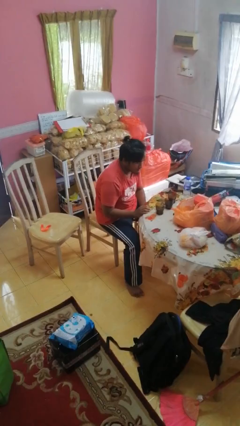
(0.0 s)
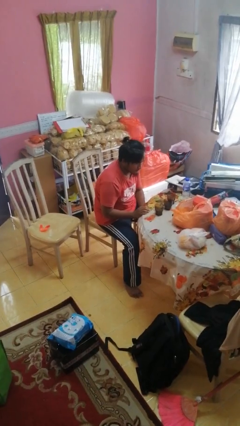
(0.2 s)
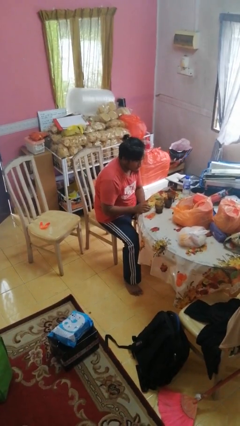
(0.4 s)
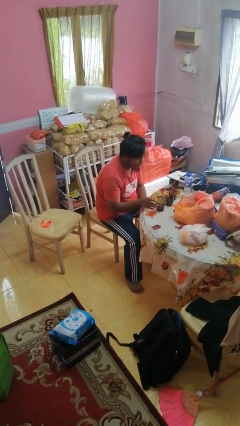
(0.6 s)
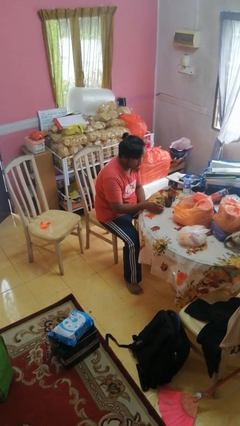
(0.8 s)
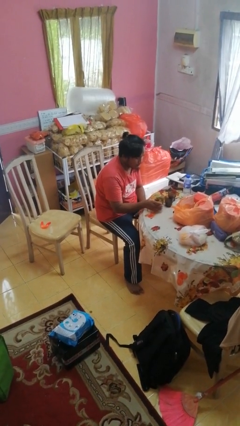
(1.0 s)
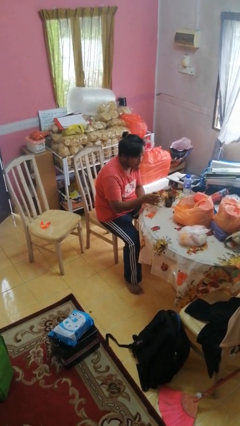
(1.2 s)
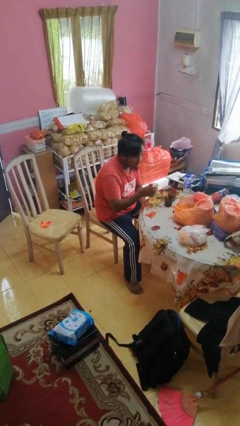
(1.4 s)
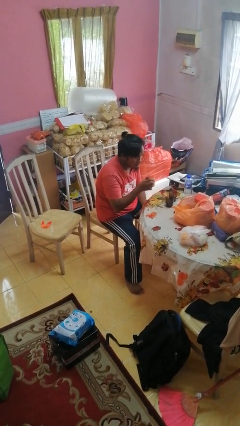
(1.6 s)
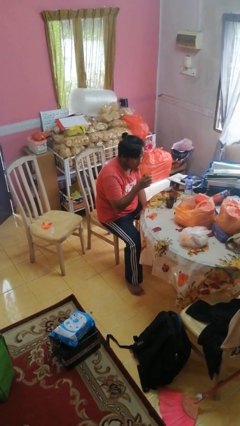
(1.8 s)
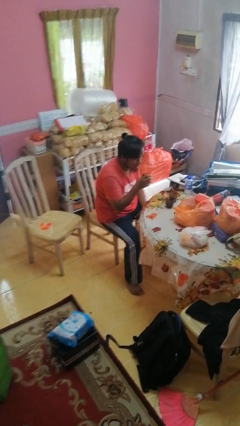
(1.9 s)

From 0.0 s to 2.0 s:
person picks up object from table

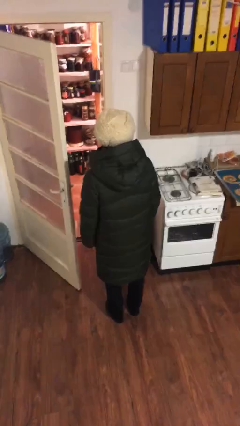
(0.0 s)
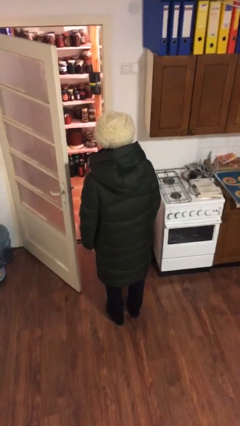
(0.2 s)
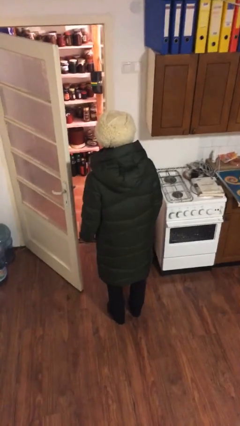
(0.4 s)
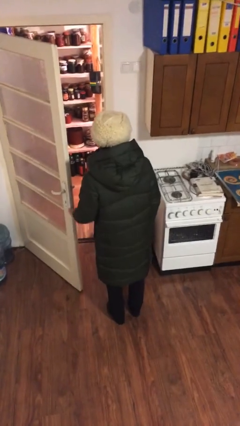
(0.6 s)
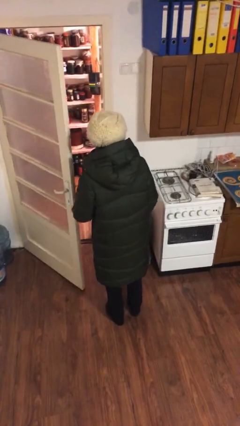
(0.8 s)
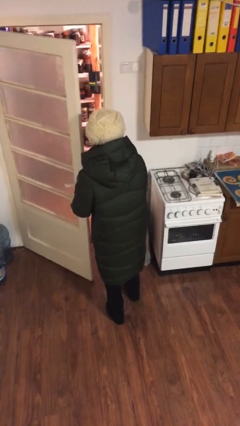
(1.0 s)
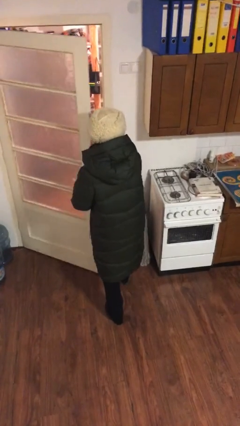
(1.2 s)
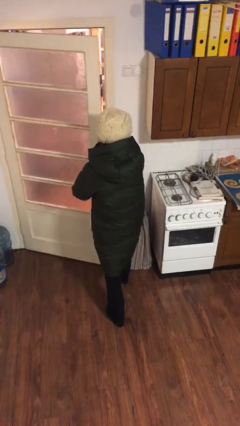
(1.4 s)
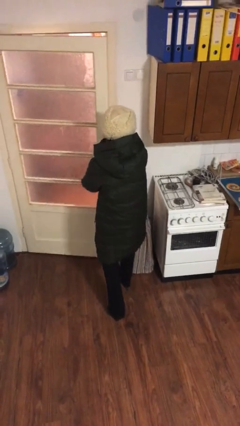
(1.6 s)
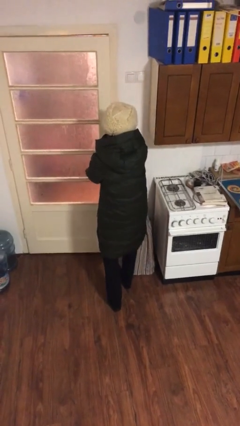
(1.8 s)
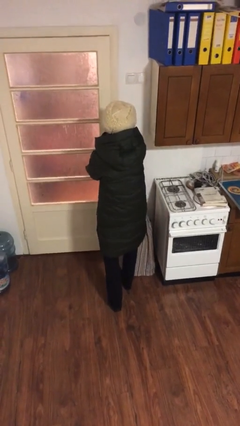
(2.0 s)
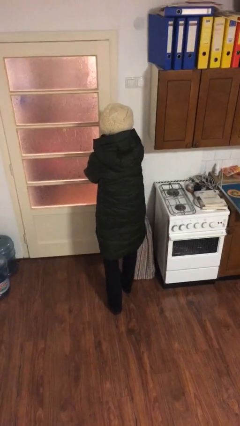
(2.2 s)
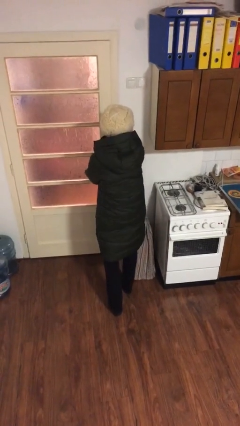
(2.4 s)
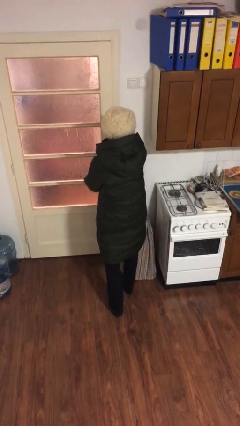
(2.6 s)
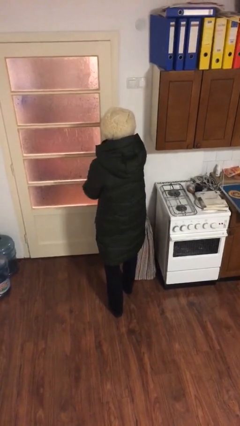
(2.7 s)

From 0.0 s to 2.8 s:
person closes facility door

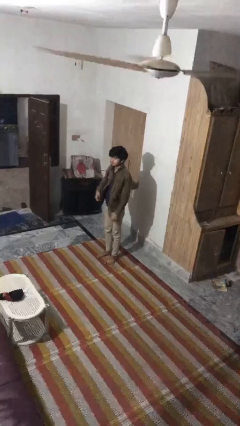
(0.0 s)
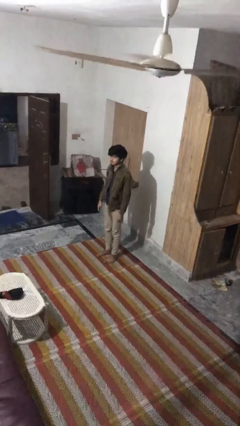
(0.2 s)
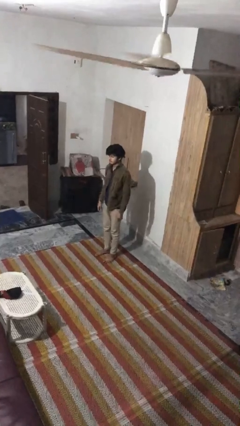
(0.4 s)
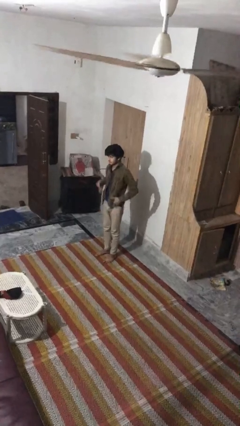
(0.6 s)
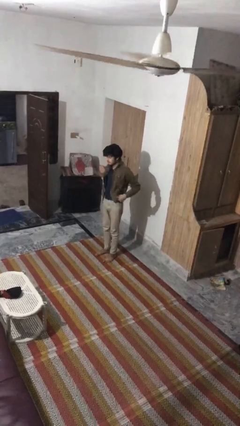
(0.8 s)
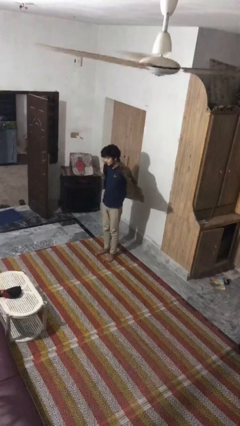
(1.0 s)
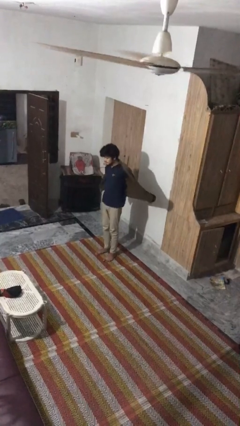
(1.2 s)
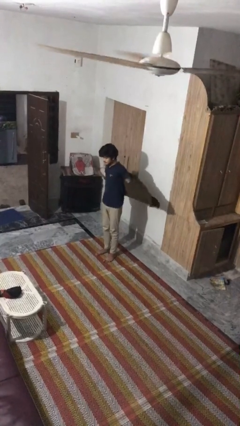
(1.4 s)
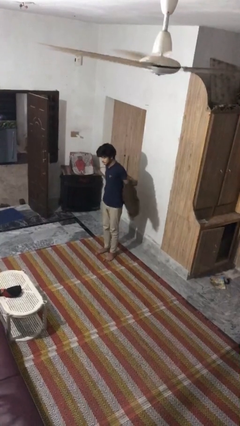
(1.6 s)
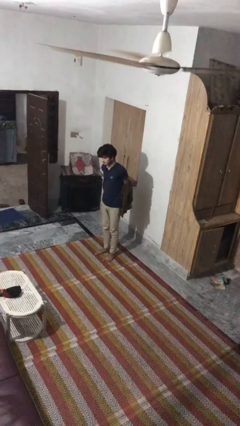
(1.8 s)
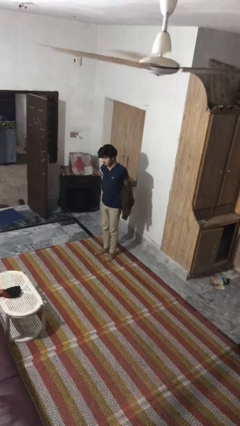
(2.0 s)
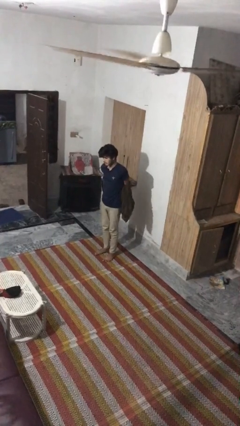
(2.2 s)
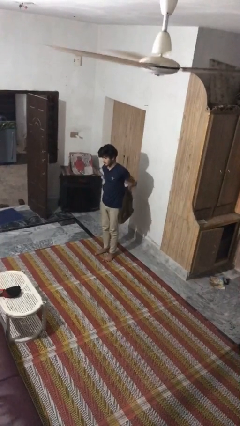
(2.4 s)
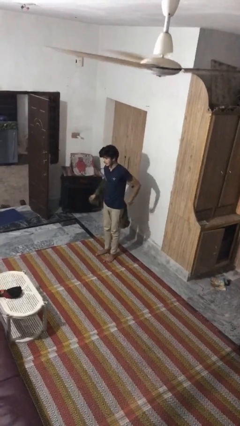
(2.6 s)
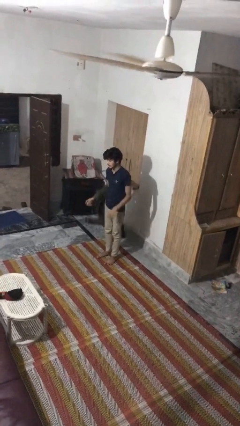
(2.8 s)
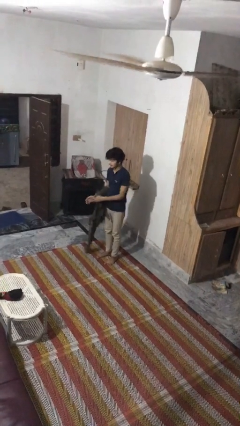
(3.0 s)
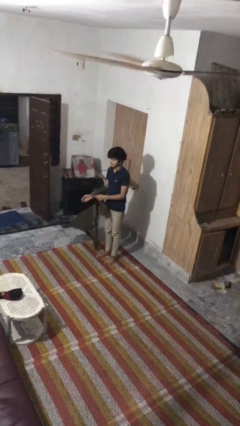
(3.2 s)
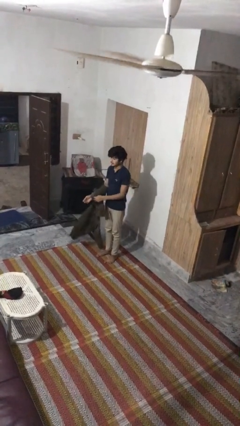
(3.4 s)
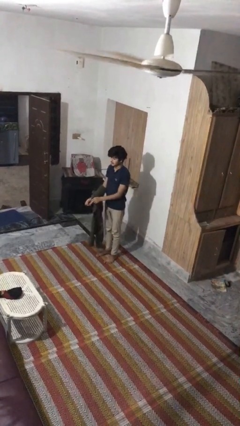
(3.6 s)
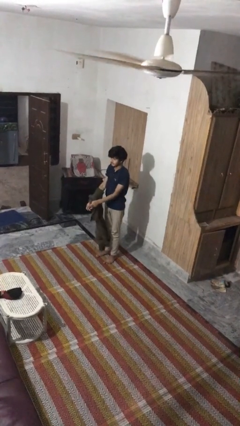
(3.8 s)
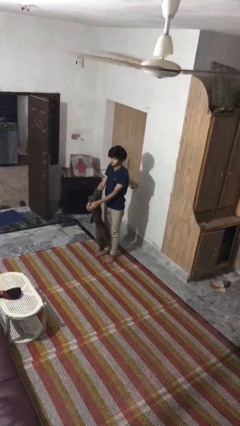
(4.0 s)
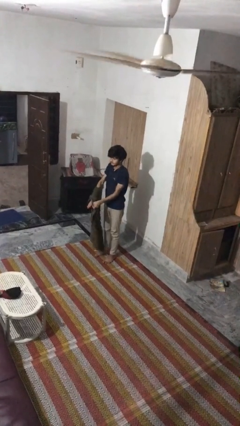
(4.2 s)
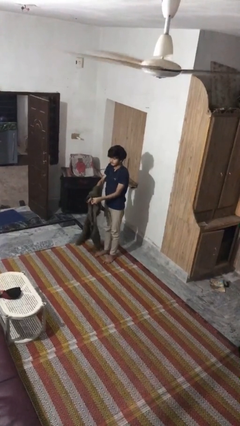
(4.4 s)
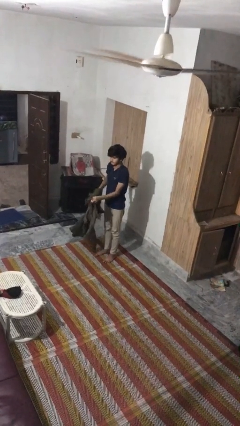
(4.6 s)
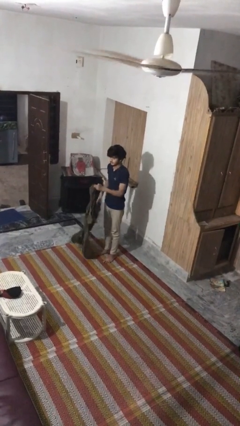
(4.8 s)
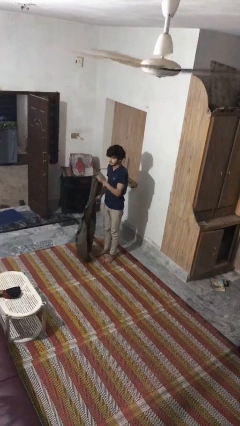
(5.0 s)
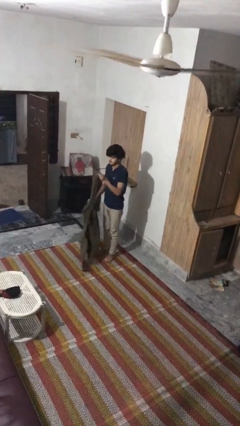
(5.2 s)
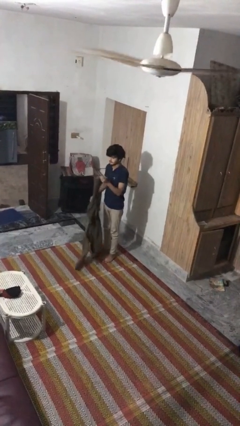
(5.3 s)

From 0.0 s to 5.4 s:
person takes off jacket

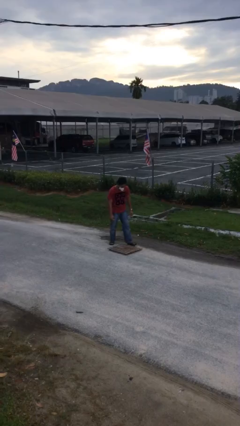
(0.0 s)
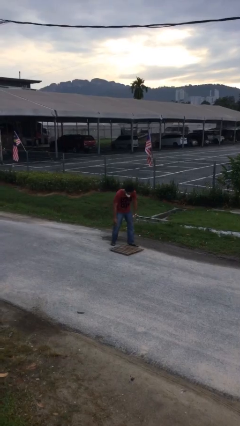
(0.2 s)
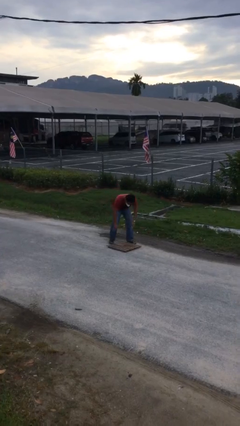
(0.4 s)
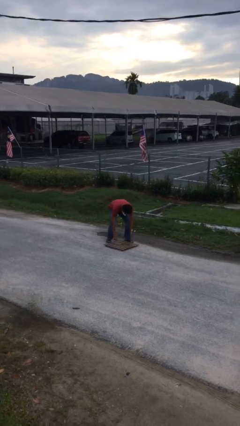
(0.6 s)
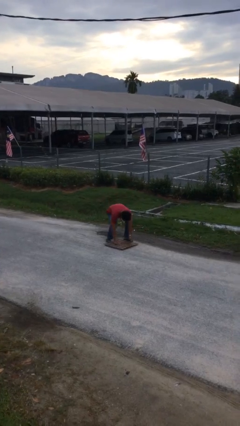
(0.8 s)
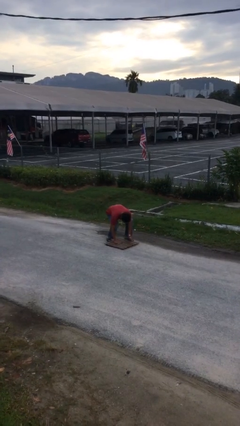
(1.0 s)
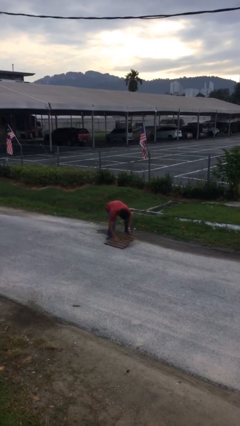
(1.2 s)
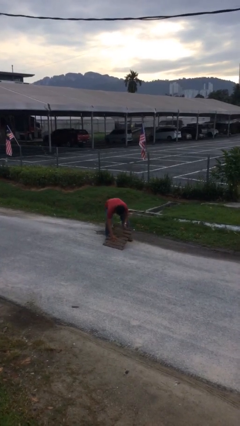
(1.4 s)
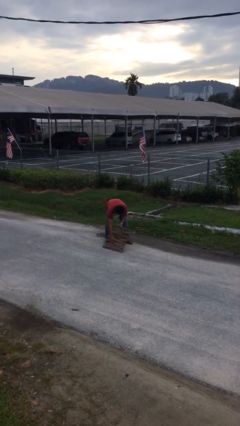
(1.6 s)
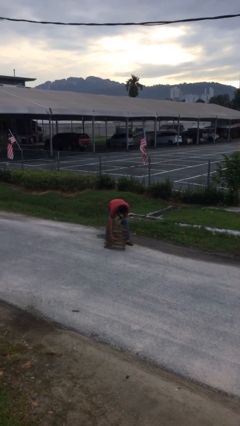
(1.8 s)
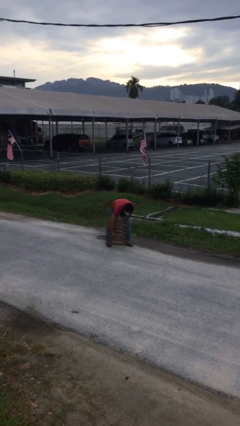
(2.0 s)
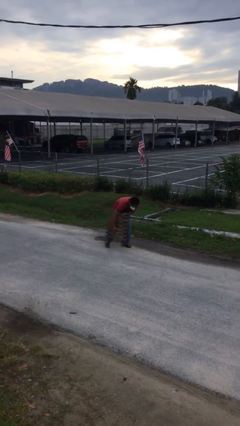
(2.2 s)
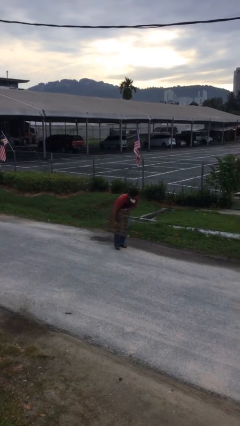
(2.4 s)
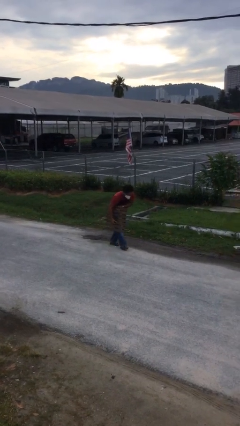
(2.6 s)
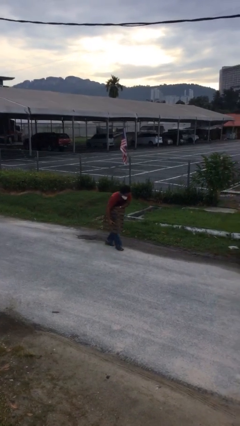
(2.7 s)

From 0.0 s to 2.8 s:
person picks up object from floor

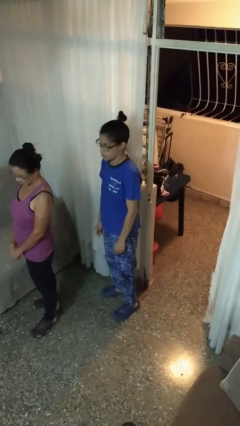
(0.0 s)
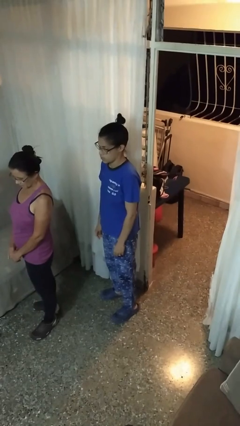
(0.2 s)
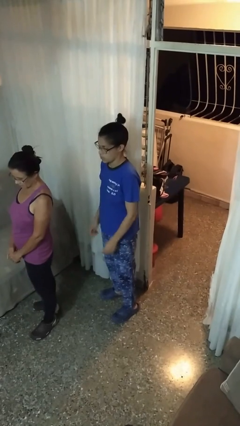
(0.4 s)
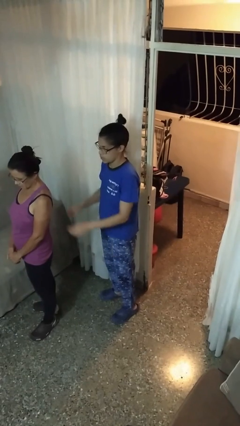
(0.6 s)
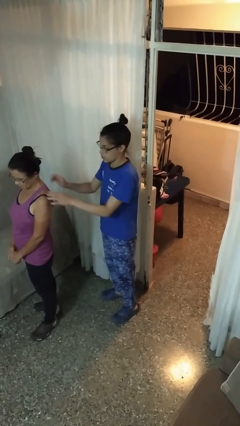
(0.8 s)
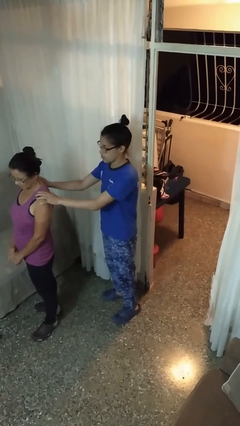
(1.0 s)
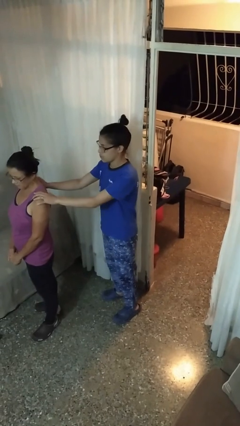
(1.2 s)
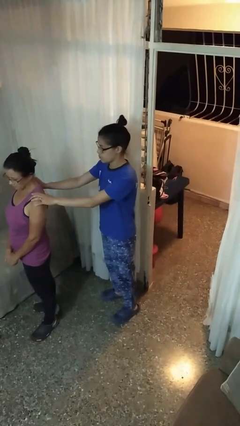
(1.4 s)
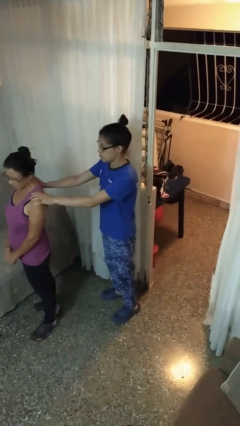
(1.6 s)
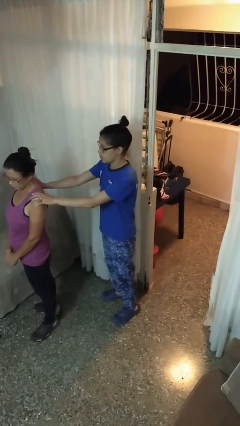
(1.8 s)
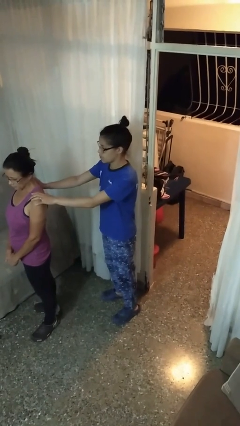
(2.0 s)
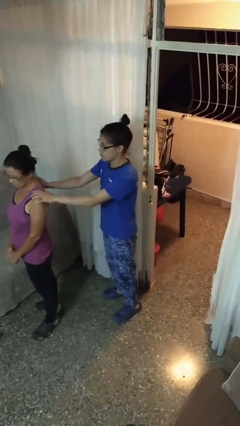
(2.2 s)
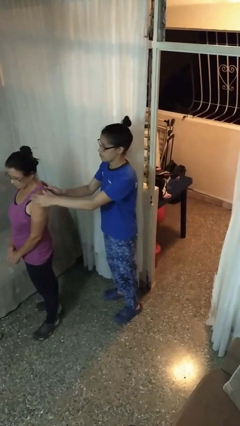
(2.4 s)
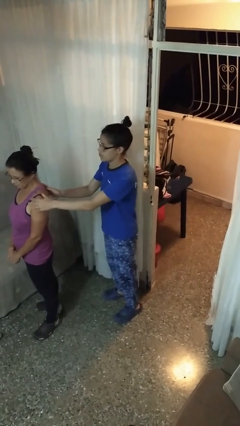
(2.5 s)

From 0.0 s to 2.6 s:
person grabs person by shoulder

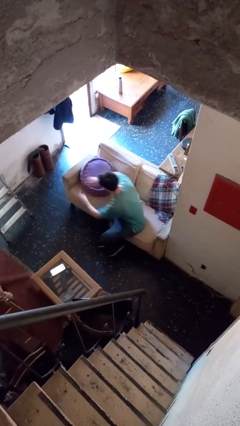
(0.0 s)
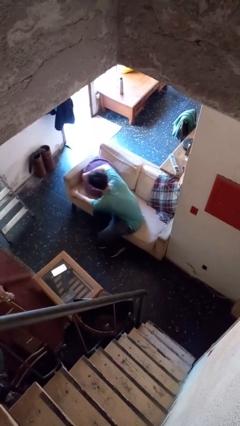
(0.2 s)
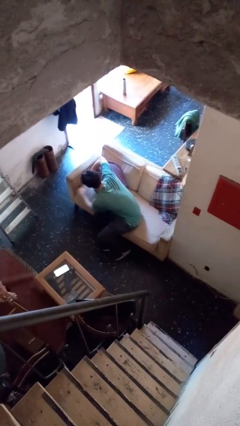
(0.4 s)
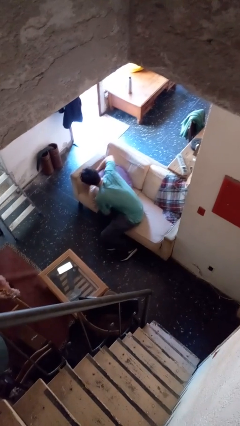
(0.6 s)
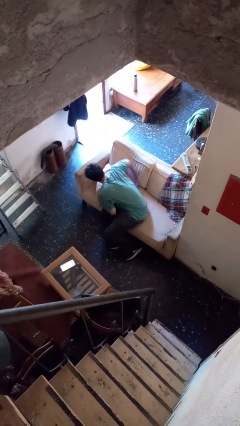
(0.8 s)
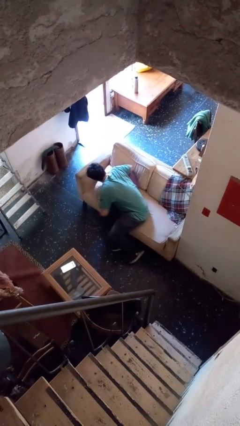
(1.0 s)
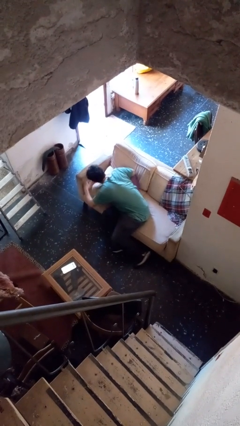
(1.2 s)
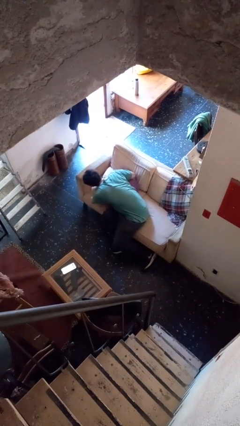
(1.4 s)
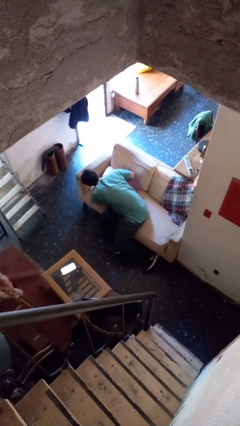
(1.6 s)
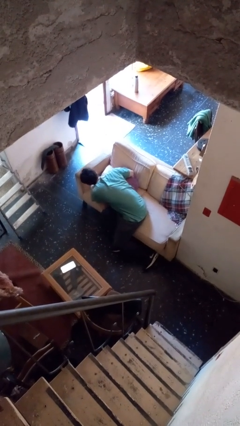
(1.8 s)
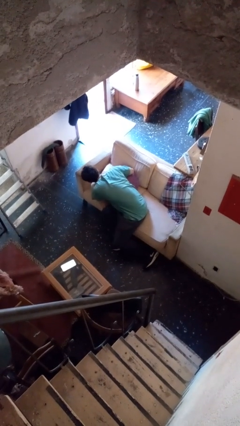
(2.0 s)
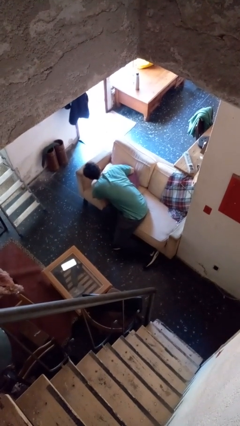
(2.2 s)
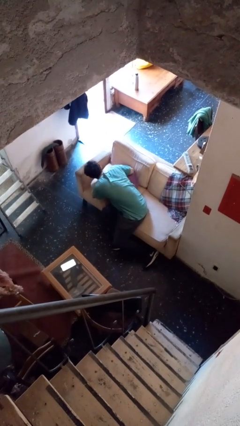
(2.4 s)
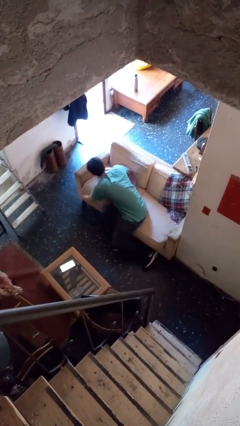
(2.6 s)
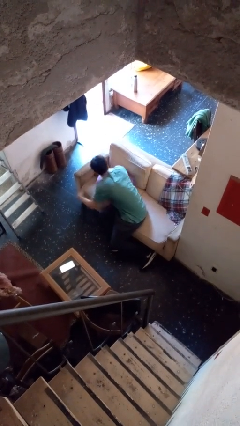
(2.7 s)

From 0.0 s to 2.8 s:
person searches in couch
